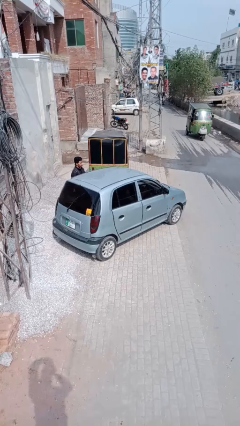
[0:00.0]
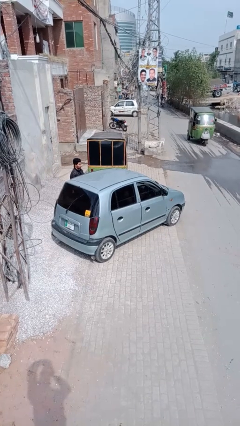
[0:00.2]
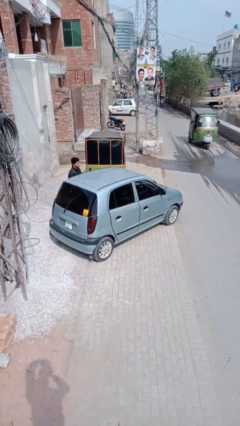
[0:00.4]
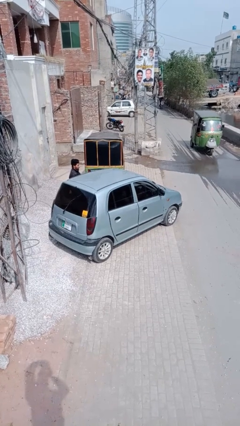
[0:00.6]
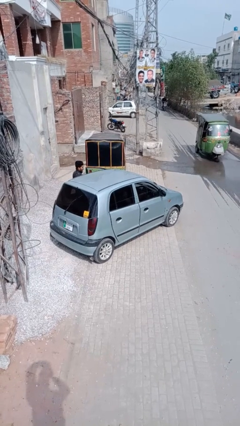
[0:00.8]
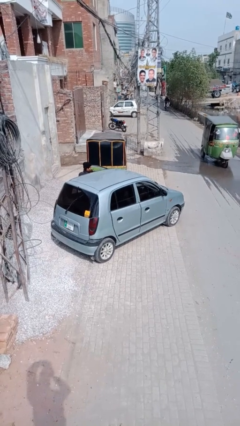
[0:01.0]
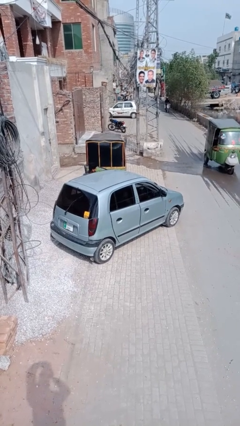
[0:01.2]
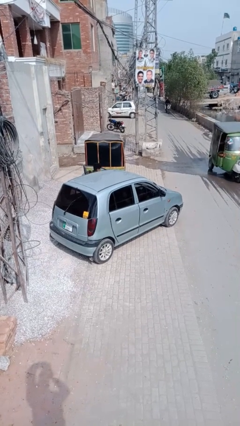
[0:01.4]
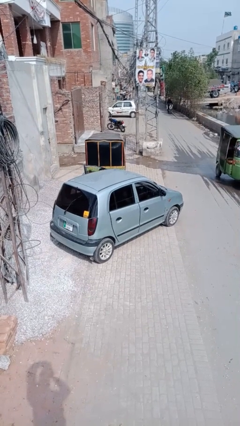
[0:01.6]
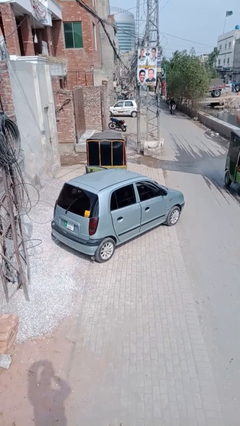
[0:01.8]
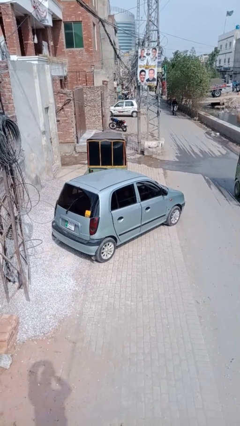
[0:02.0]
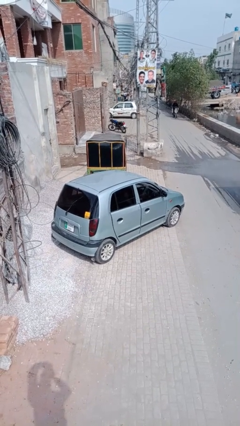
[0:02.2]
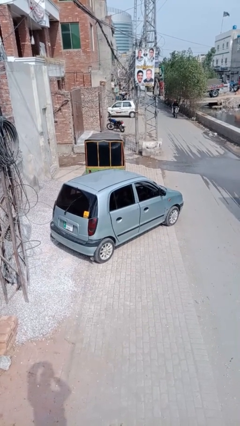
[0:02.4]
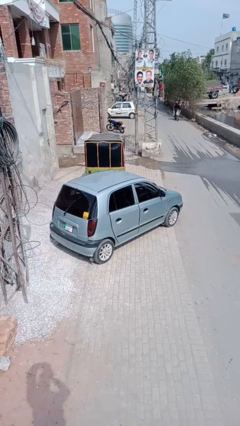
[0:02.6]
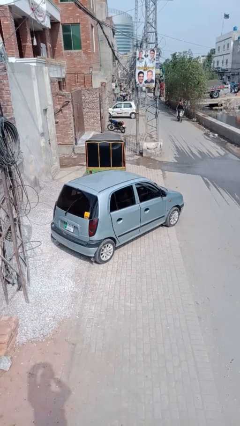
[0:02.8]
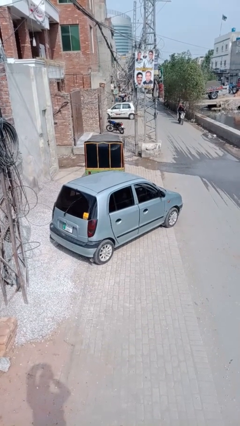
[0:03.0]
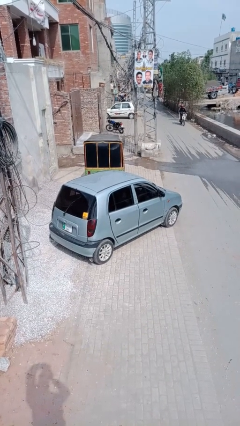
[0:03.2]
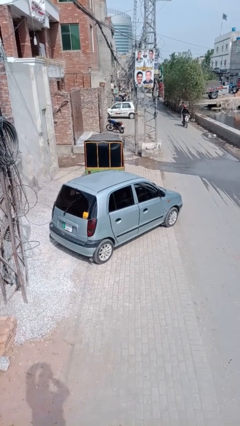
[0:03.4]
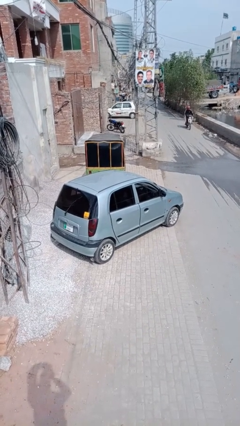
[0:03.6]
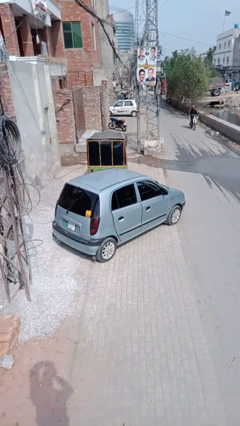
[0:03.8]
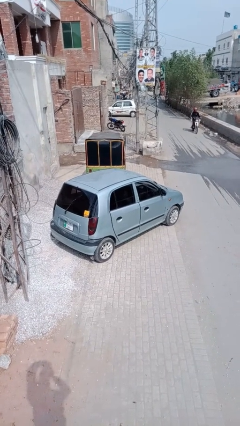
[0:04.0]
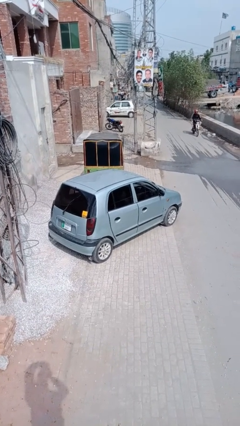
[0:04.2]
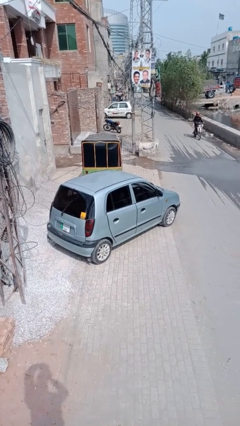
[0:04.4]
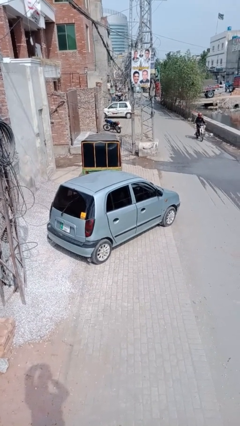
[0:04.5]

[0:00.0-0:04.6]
car picks up person

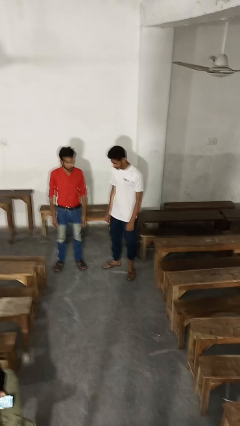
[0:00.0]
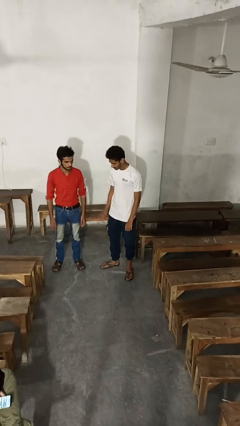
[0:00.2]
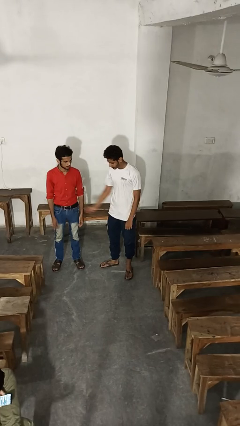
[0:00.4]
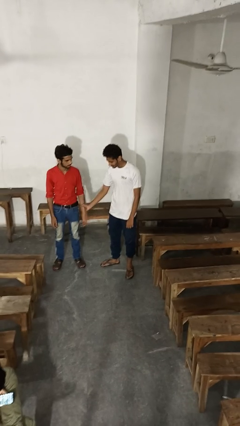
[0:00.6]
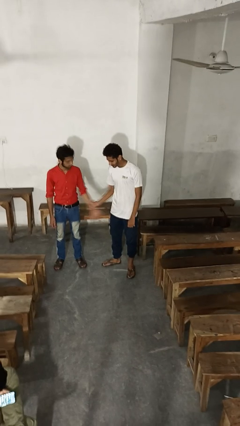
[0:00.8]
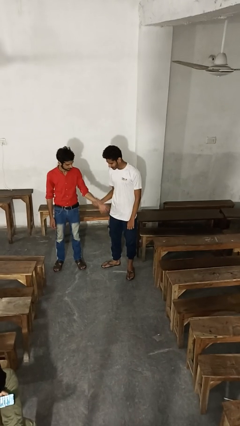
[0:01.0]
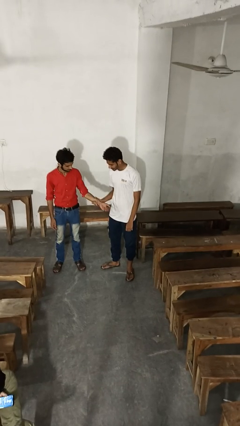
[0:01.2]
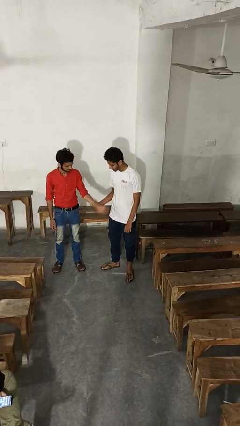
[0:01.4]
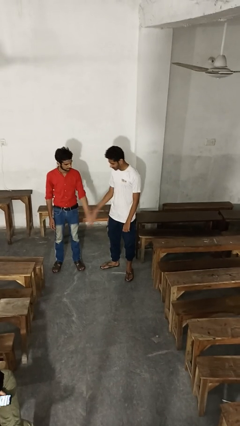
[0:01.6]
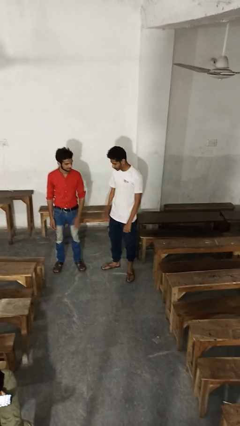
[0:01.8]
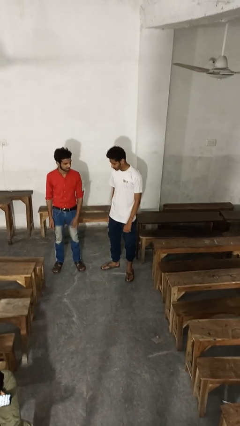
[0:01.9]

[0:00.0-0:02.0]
person grabs person by forearm

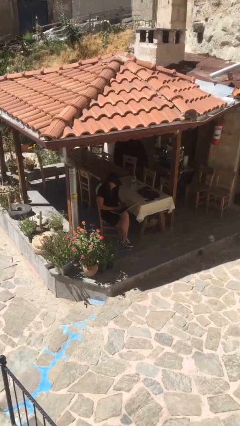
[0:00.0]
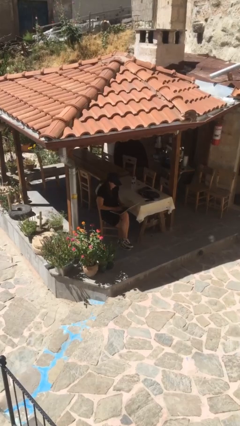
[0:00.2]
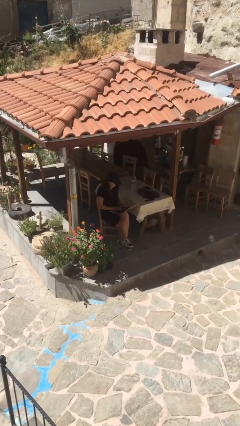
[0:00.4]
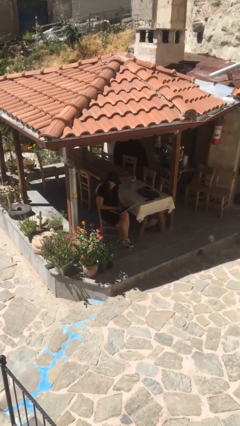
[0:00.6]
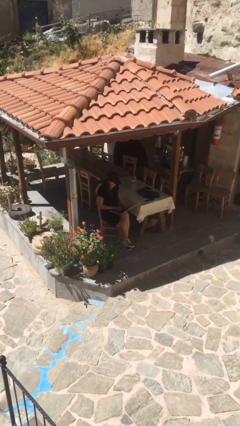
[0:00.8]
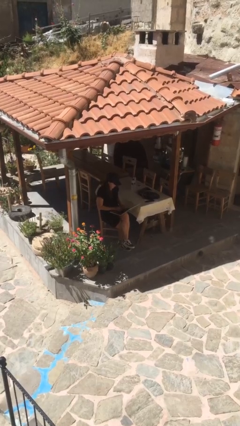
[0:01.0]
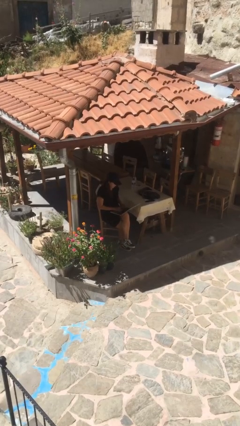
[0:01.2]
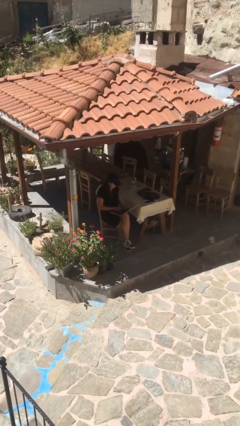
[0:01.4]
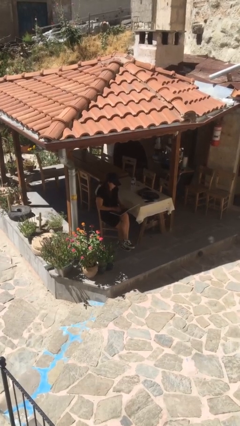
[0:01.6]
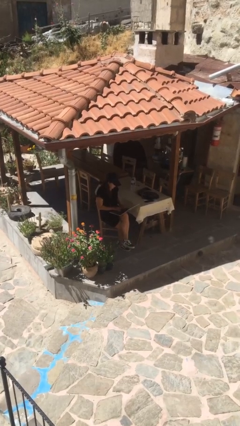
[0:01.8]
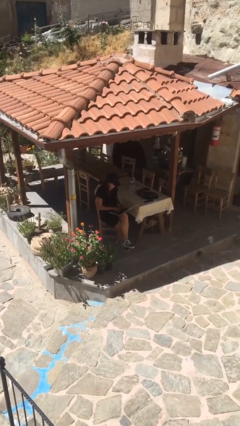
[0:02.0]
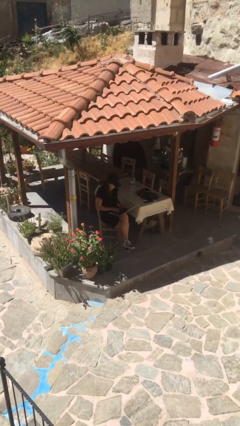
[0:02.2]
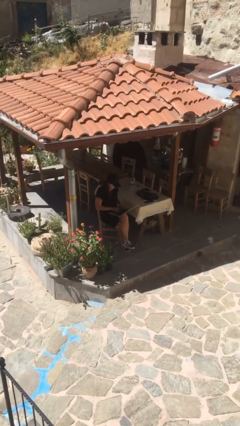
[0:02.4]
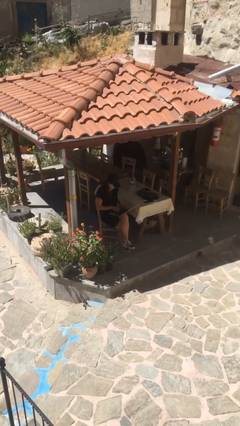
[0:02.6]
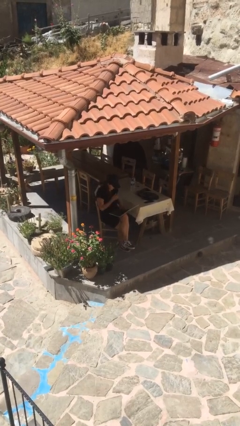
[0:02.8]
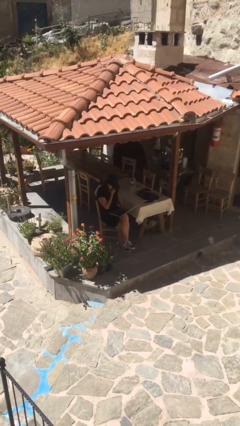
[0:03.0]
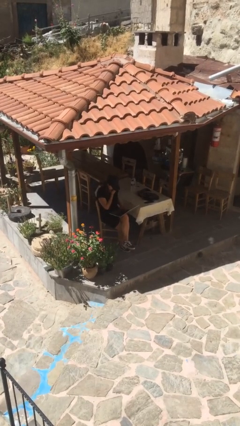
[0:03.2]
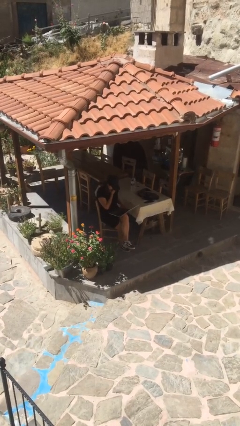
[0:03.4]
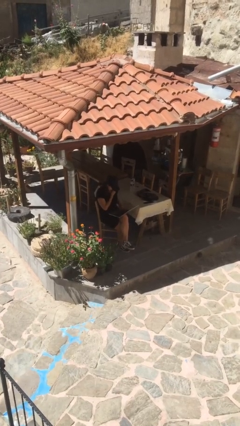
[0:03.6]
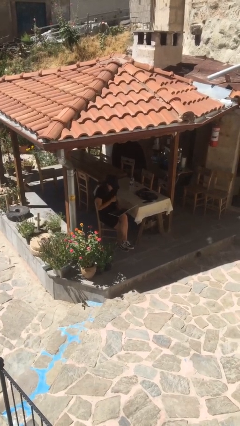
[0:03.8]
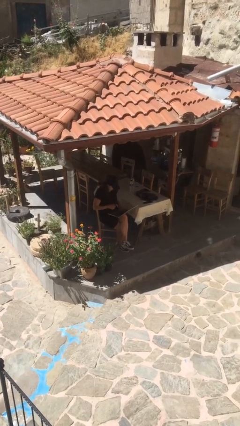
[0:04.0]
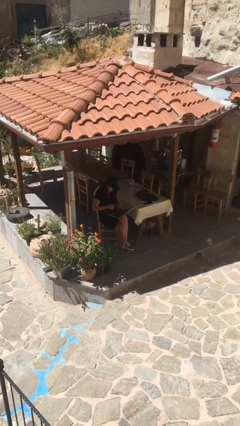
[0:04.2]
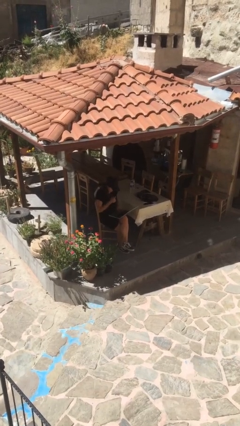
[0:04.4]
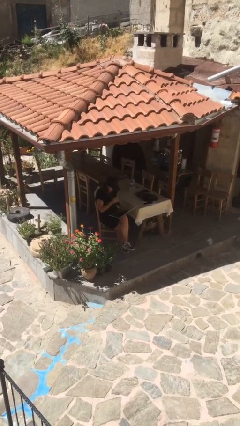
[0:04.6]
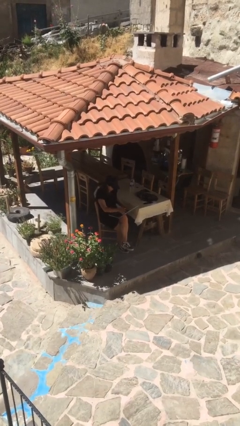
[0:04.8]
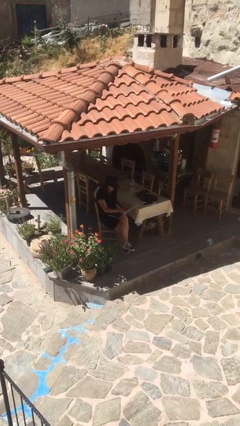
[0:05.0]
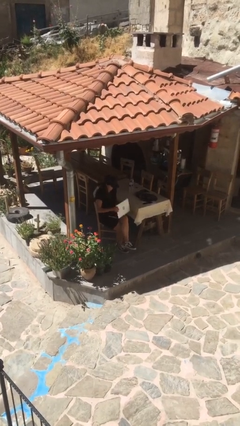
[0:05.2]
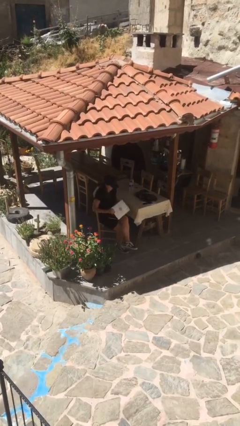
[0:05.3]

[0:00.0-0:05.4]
person interacts with laptop

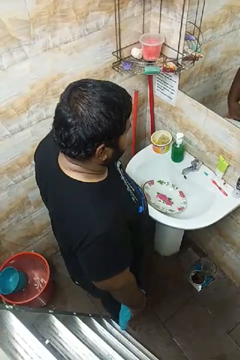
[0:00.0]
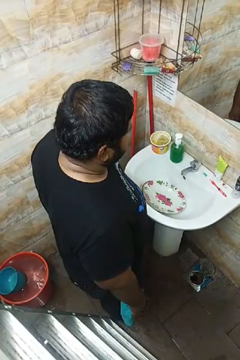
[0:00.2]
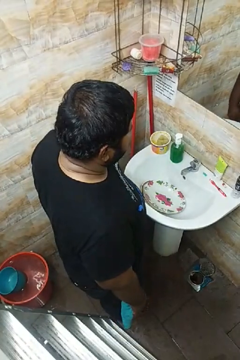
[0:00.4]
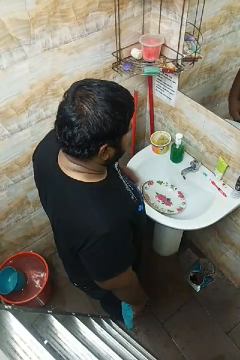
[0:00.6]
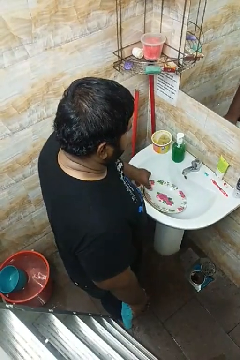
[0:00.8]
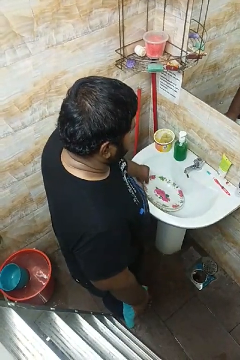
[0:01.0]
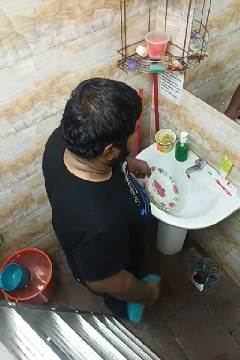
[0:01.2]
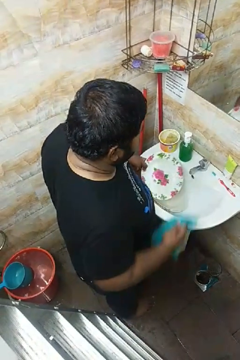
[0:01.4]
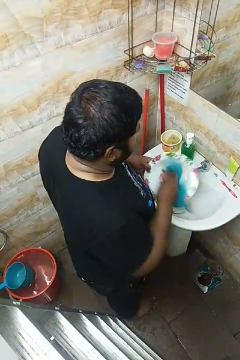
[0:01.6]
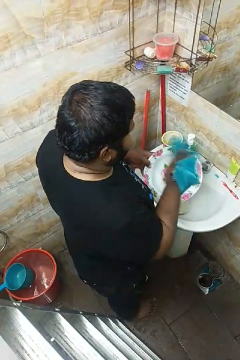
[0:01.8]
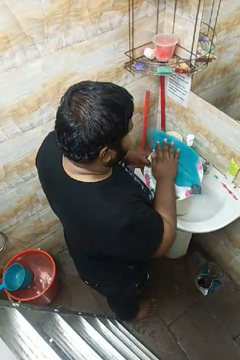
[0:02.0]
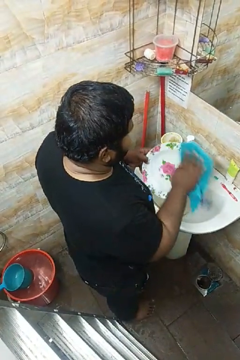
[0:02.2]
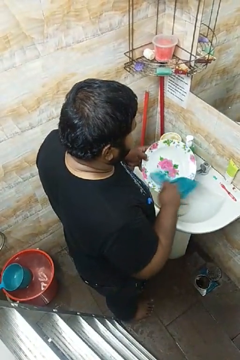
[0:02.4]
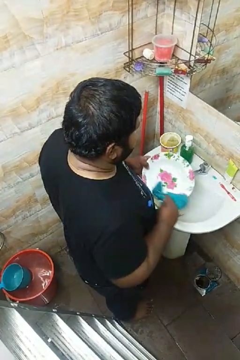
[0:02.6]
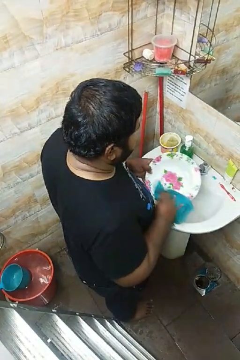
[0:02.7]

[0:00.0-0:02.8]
person dries dish

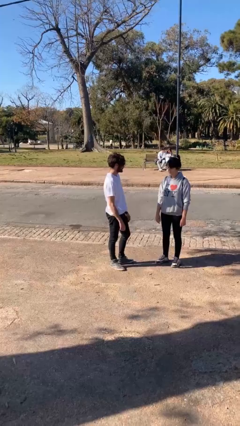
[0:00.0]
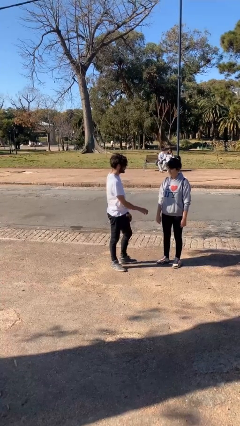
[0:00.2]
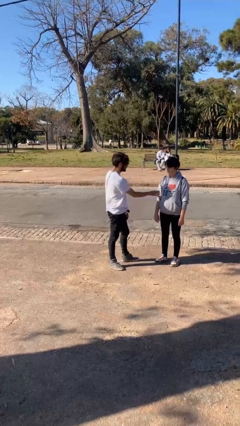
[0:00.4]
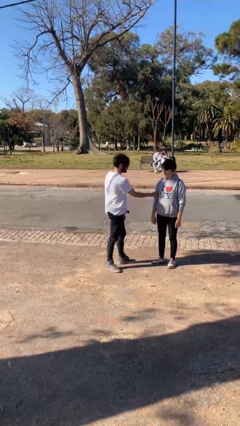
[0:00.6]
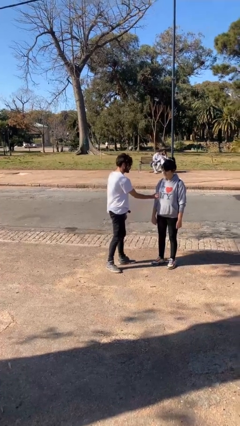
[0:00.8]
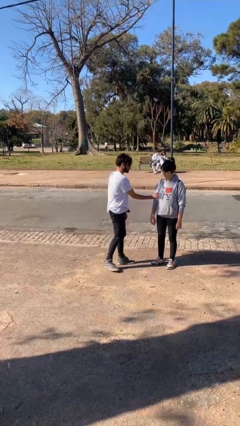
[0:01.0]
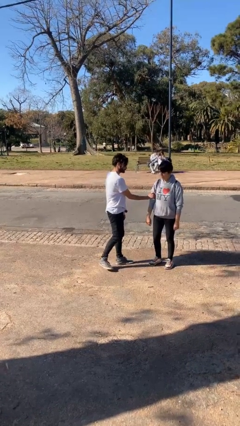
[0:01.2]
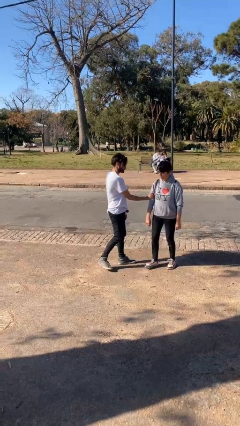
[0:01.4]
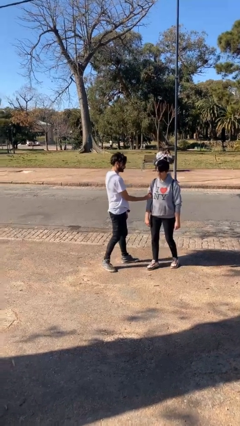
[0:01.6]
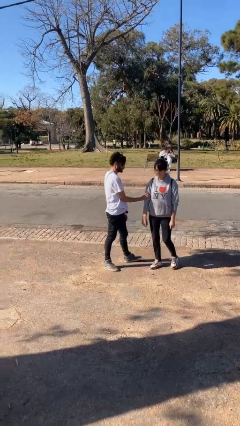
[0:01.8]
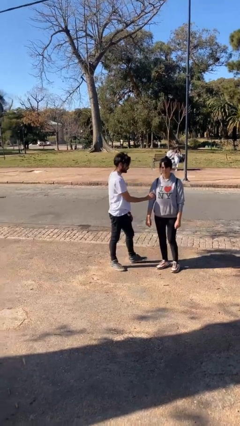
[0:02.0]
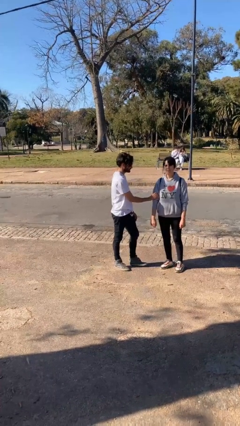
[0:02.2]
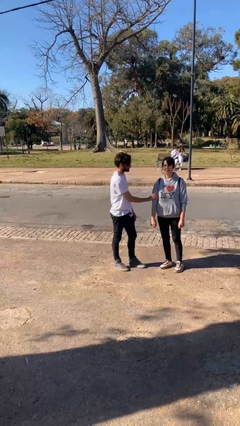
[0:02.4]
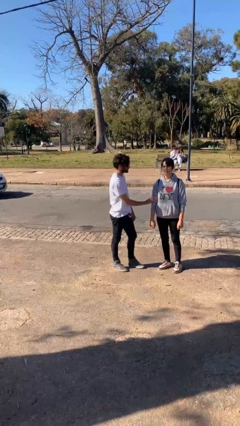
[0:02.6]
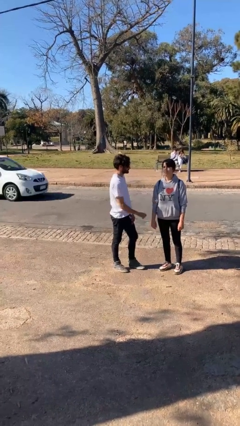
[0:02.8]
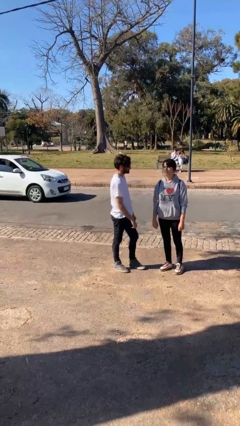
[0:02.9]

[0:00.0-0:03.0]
person grabs person by bicep
